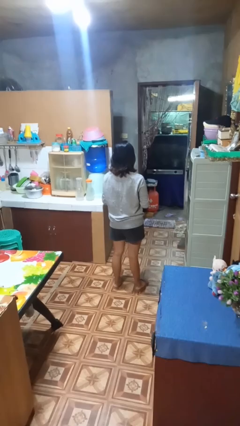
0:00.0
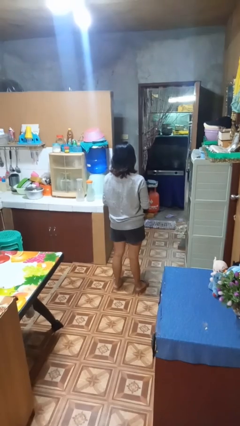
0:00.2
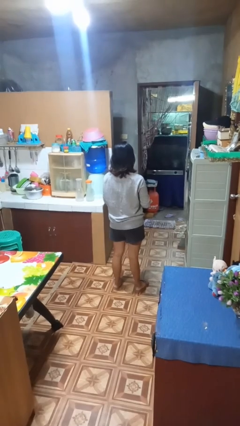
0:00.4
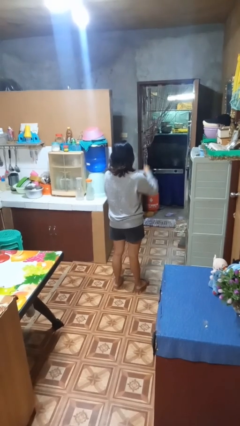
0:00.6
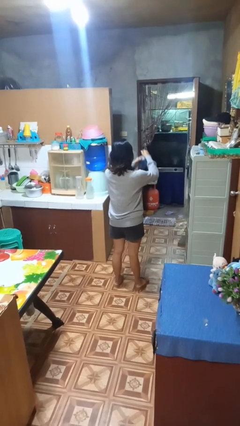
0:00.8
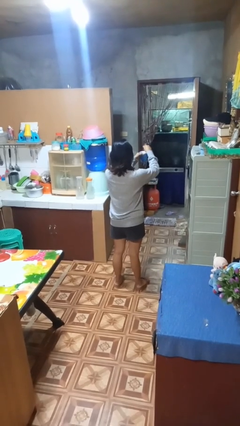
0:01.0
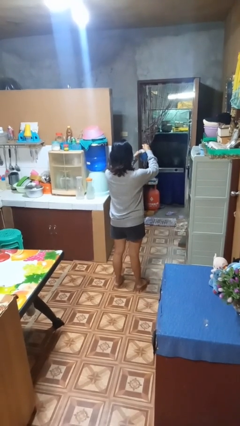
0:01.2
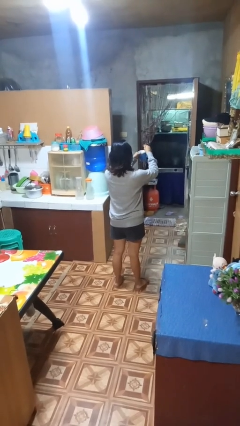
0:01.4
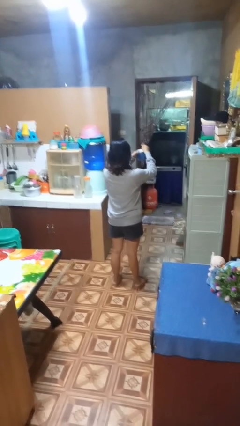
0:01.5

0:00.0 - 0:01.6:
person stirs mug

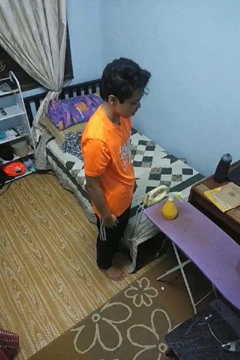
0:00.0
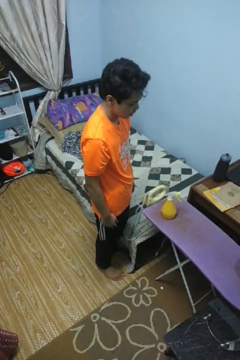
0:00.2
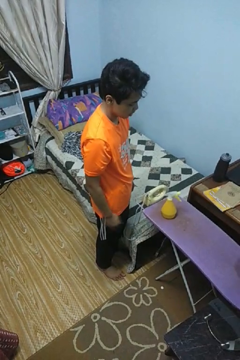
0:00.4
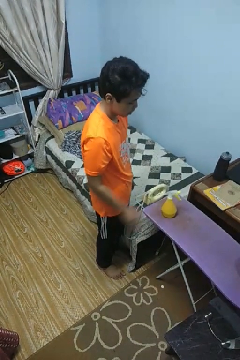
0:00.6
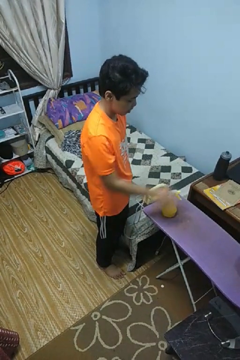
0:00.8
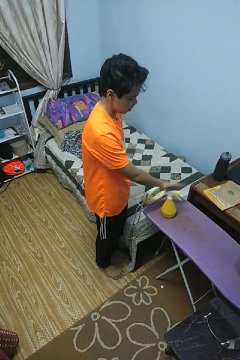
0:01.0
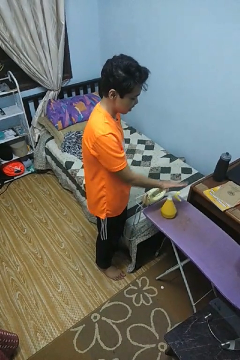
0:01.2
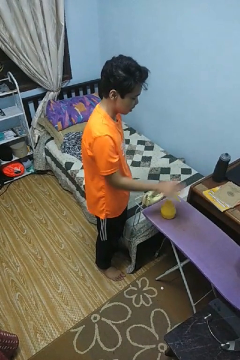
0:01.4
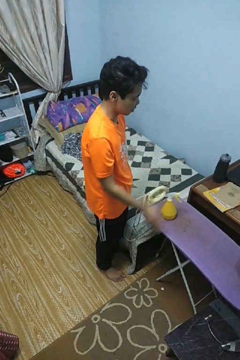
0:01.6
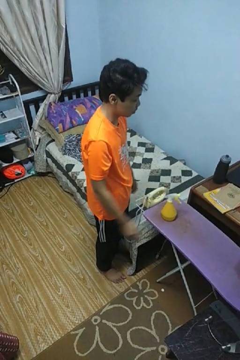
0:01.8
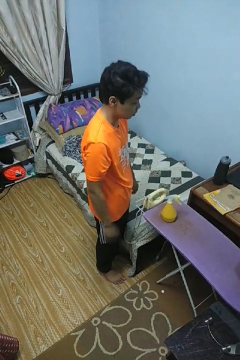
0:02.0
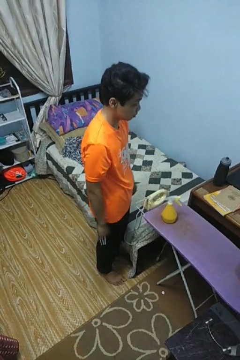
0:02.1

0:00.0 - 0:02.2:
person waves hand over object

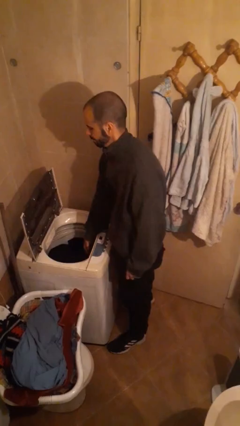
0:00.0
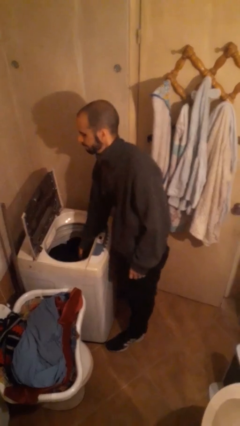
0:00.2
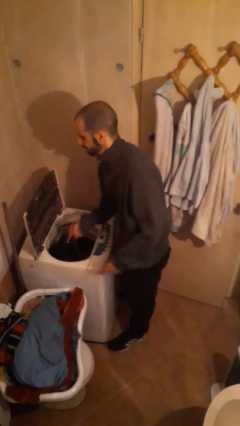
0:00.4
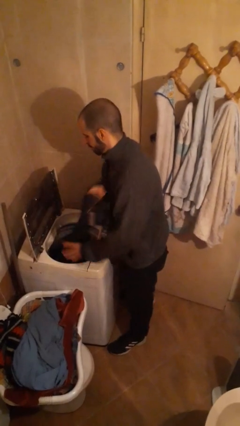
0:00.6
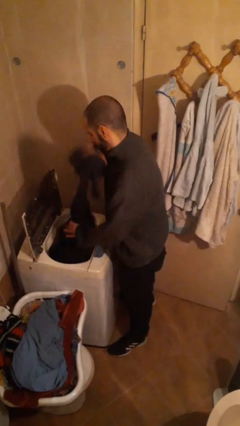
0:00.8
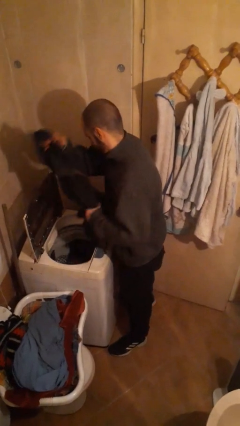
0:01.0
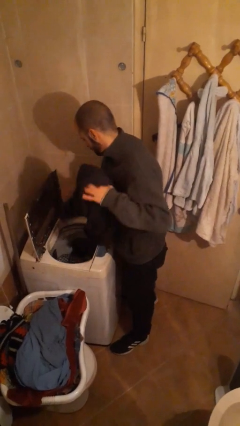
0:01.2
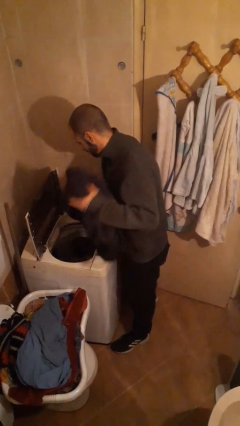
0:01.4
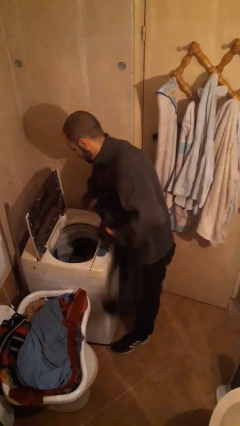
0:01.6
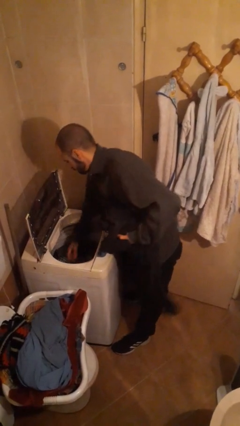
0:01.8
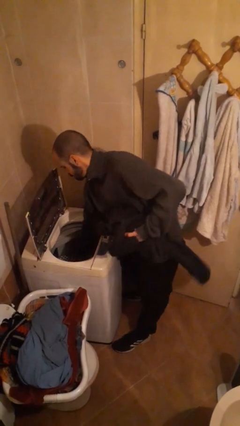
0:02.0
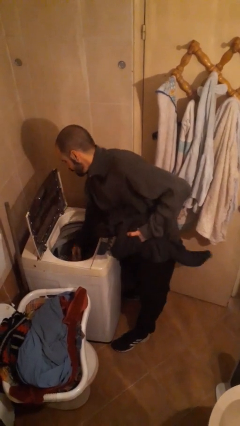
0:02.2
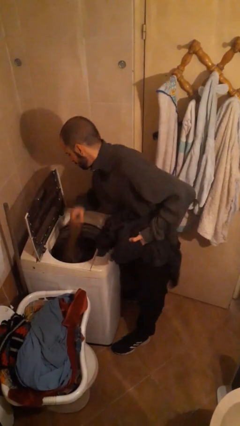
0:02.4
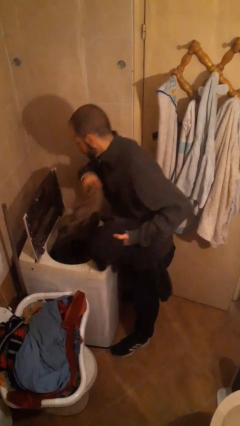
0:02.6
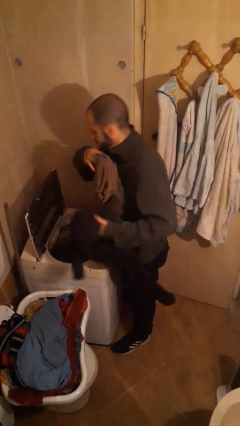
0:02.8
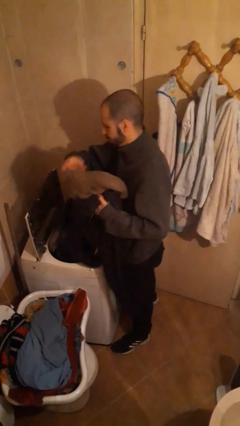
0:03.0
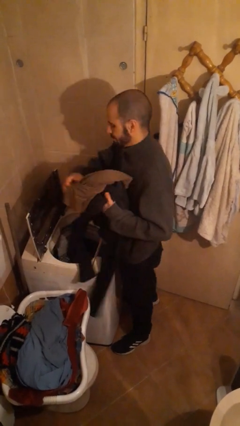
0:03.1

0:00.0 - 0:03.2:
person loads clotheswasher

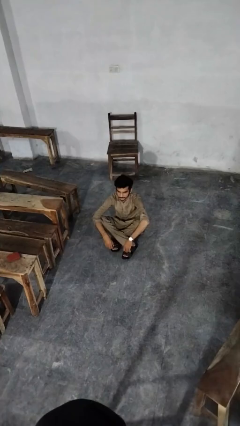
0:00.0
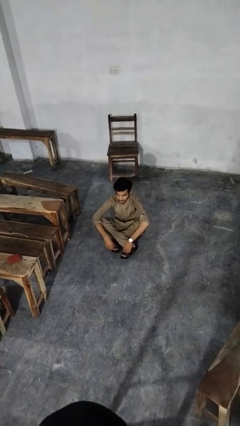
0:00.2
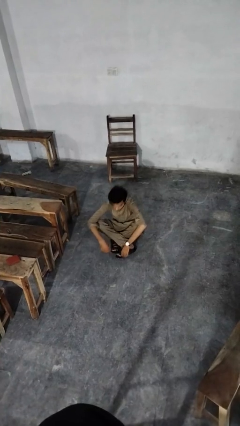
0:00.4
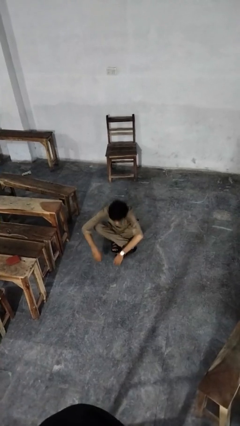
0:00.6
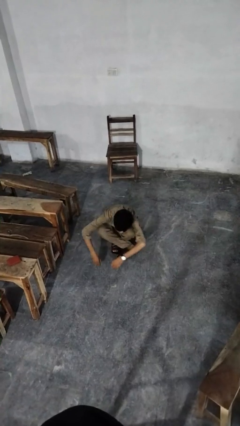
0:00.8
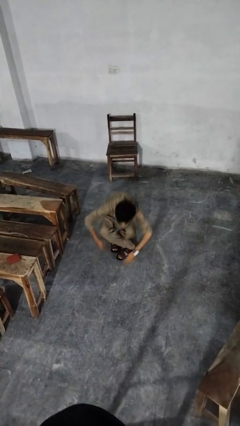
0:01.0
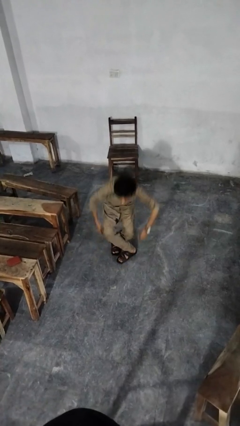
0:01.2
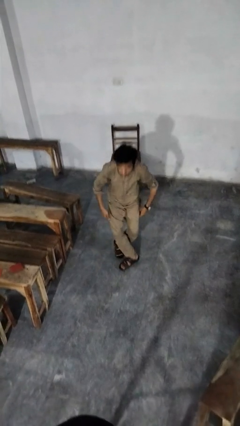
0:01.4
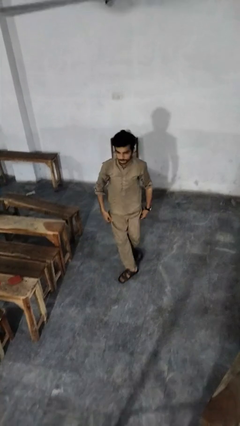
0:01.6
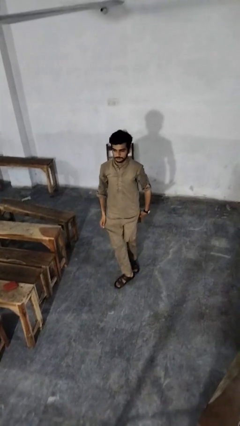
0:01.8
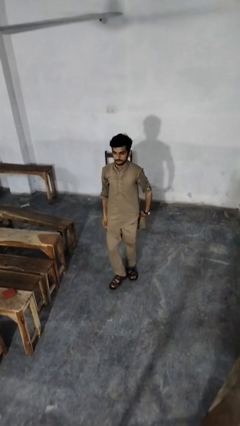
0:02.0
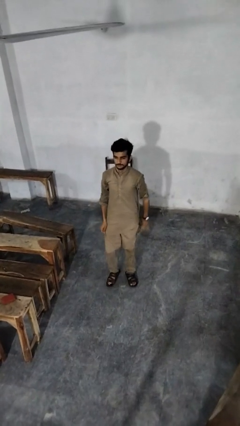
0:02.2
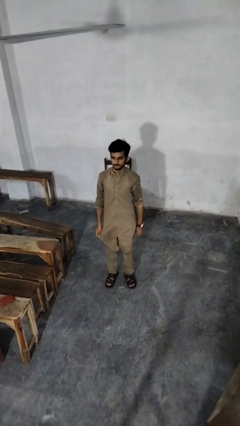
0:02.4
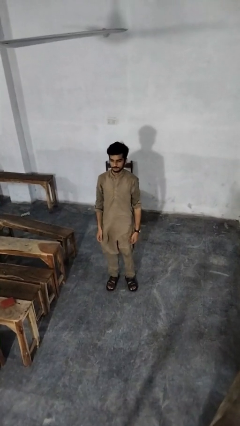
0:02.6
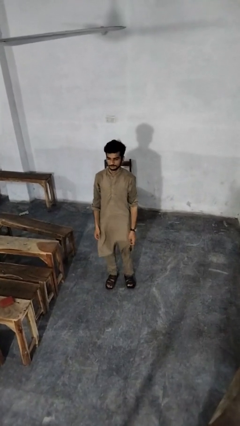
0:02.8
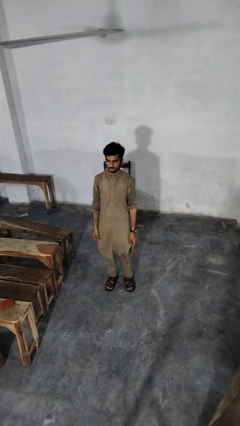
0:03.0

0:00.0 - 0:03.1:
person stands up from floor

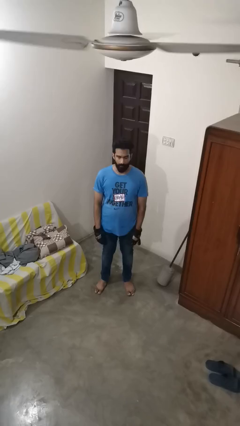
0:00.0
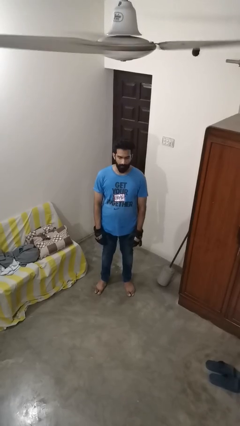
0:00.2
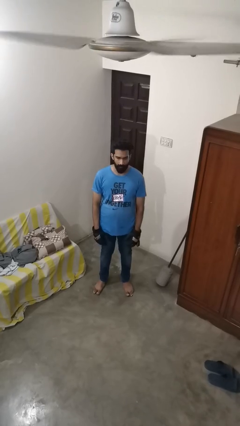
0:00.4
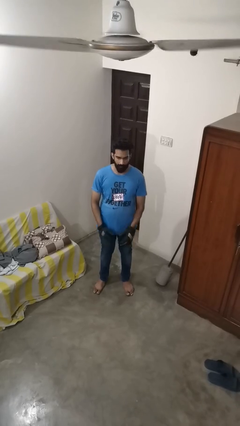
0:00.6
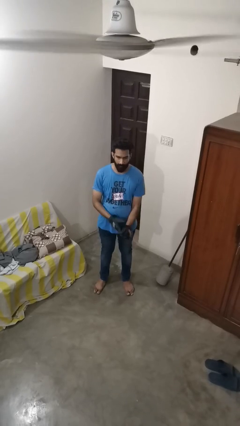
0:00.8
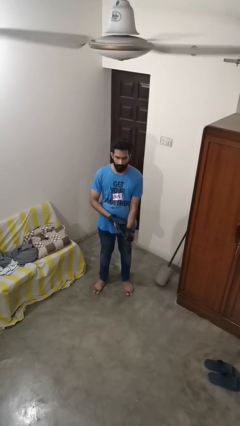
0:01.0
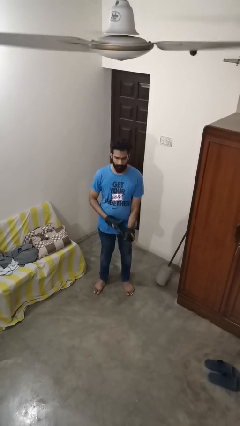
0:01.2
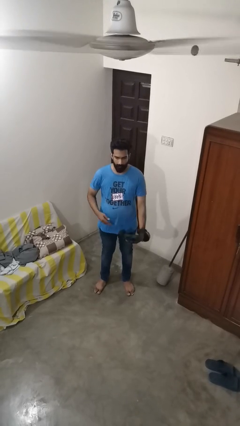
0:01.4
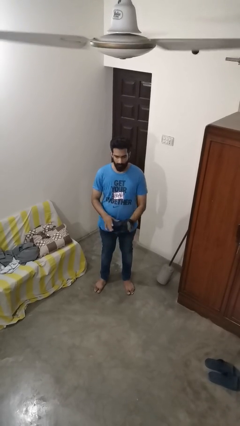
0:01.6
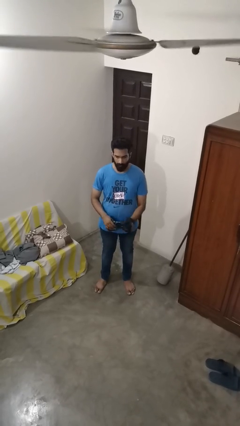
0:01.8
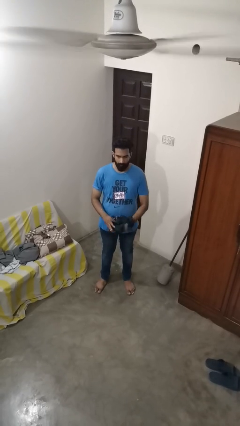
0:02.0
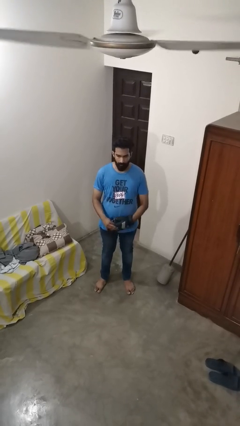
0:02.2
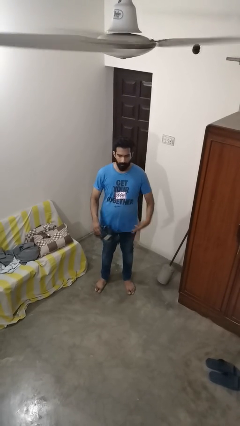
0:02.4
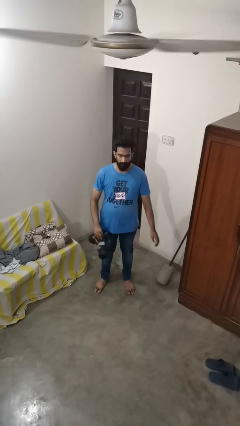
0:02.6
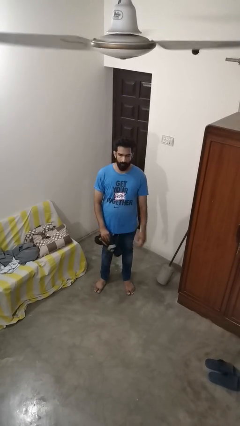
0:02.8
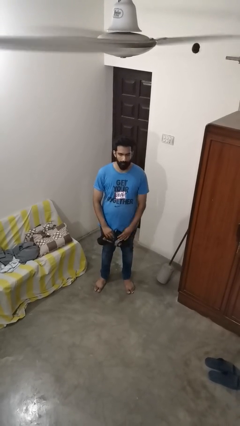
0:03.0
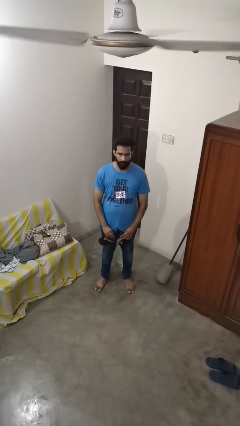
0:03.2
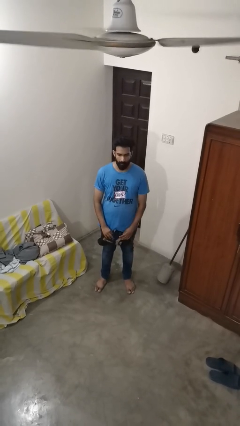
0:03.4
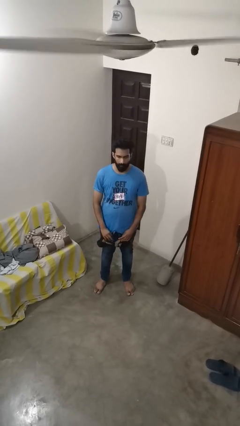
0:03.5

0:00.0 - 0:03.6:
person takes off gloves

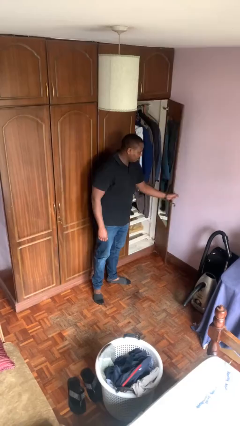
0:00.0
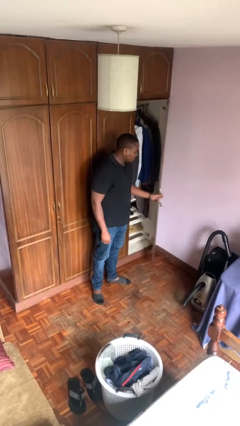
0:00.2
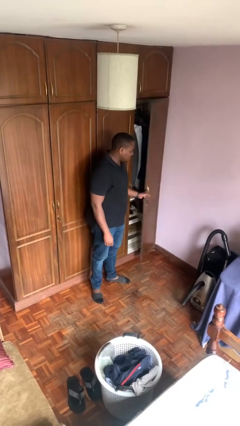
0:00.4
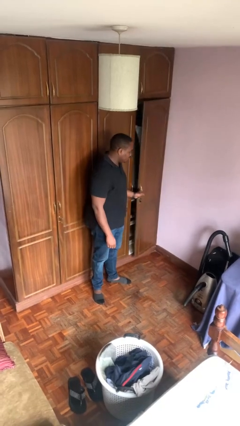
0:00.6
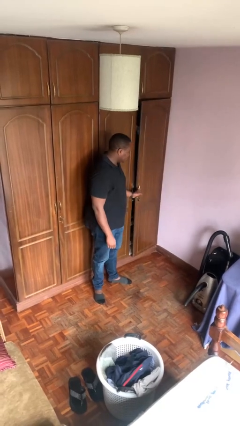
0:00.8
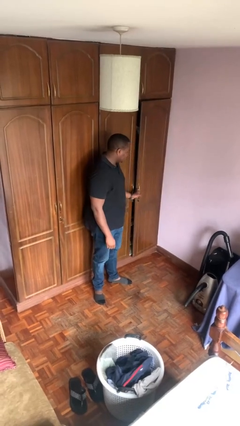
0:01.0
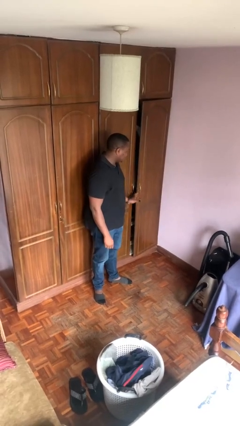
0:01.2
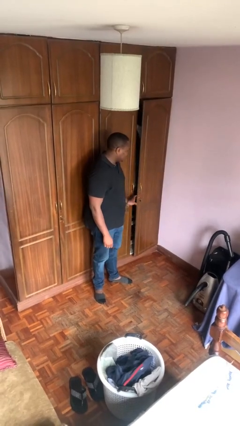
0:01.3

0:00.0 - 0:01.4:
person closes closet door

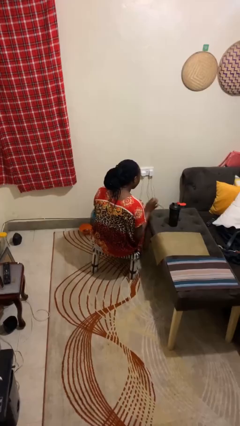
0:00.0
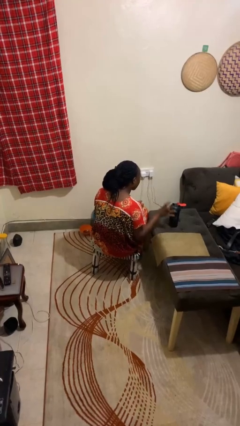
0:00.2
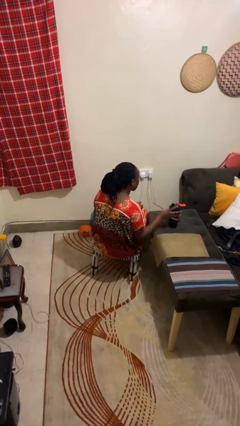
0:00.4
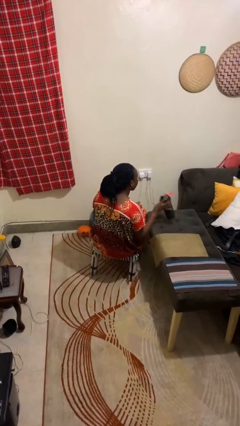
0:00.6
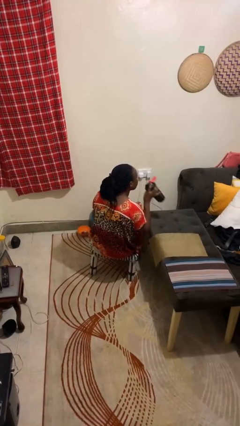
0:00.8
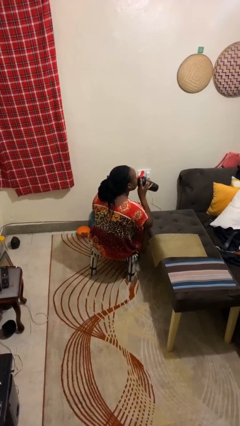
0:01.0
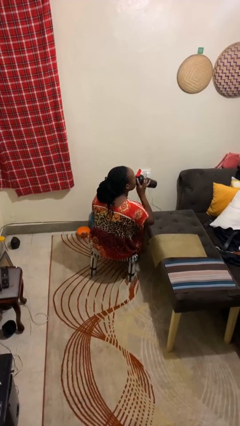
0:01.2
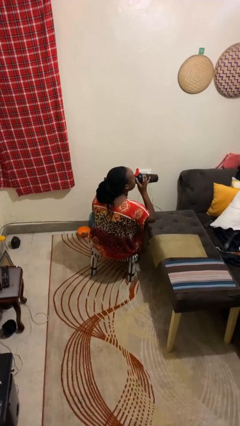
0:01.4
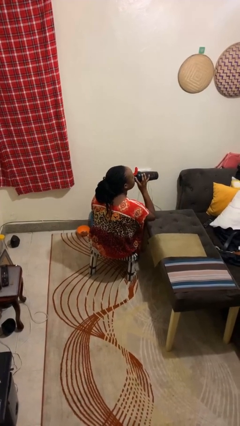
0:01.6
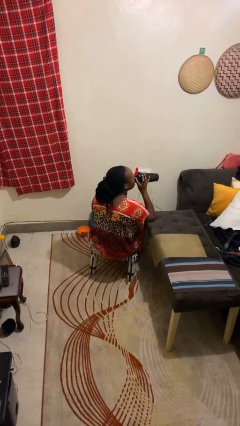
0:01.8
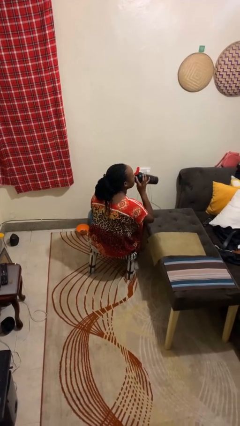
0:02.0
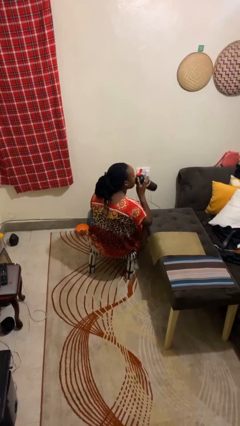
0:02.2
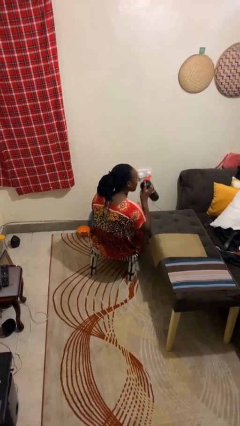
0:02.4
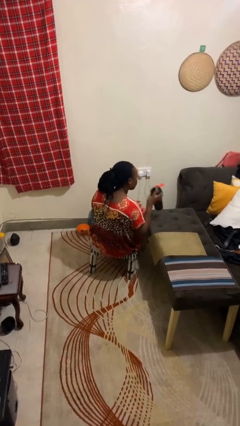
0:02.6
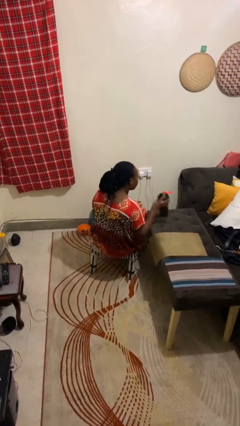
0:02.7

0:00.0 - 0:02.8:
person drinks from cup

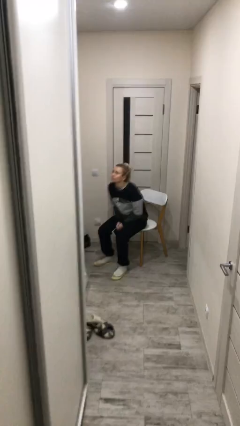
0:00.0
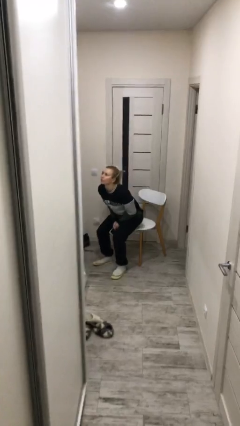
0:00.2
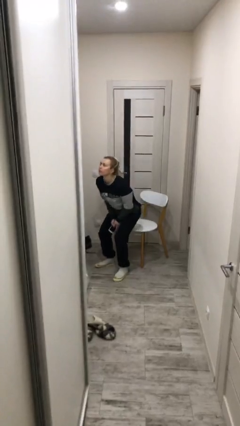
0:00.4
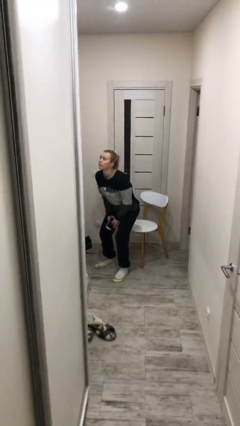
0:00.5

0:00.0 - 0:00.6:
person stands up
